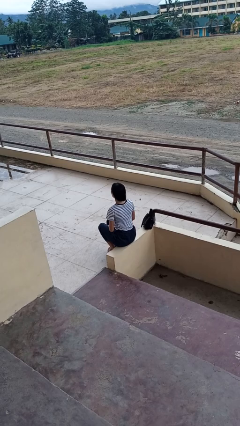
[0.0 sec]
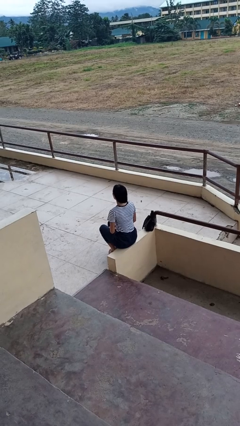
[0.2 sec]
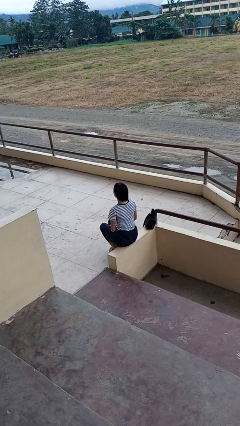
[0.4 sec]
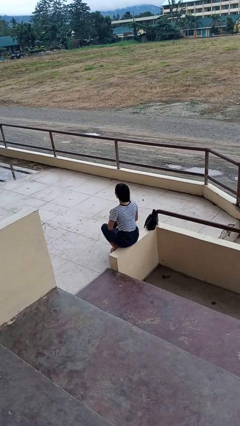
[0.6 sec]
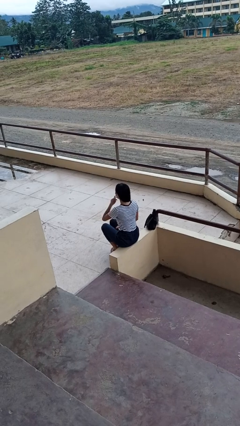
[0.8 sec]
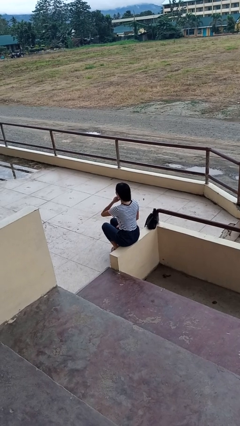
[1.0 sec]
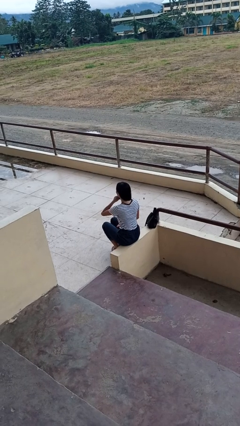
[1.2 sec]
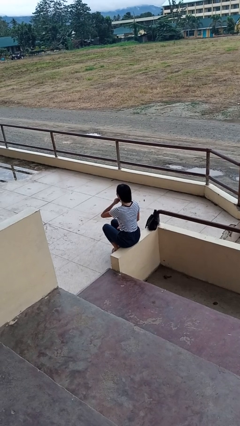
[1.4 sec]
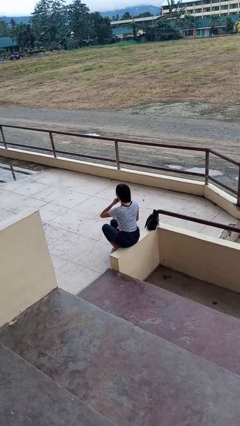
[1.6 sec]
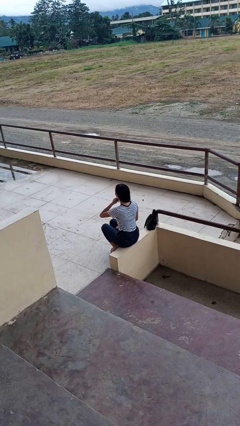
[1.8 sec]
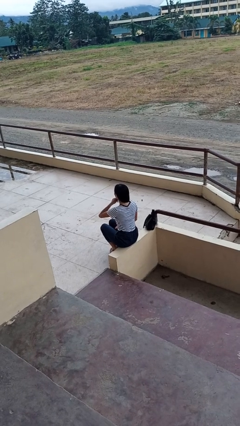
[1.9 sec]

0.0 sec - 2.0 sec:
person strokes chin

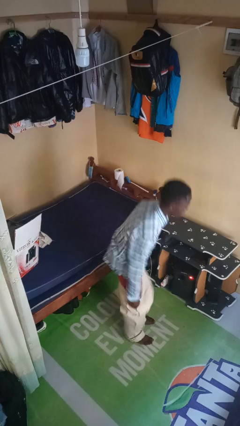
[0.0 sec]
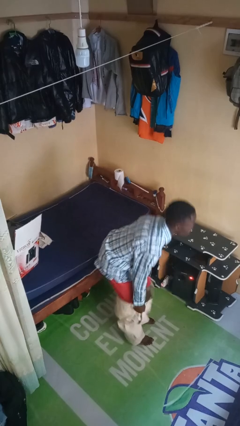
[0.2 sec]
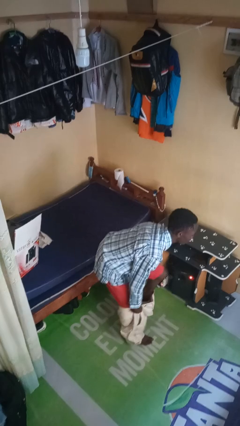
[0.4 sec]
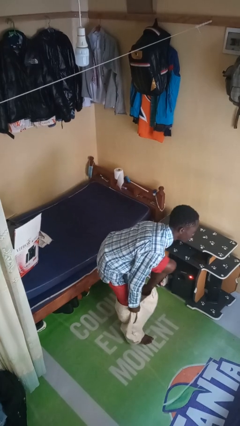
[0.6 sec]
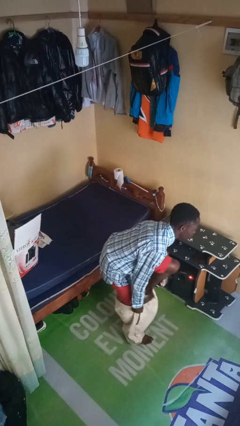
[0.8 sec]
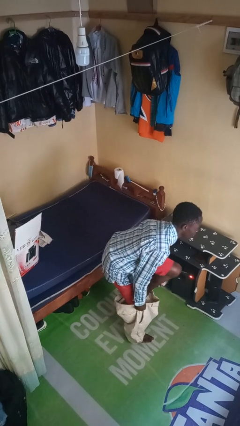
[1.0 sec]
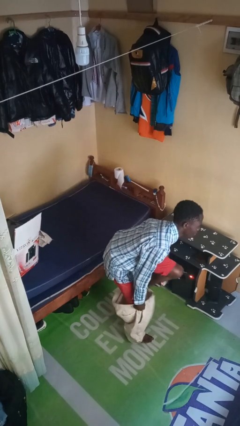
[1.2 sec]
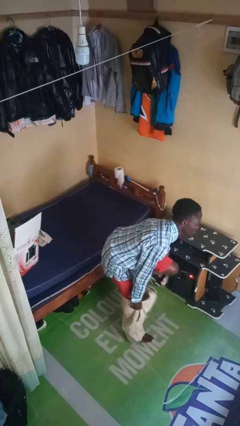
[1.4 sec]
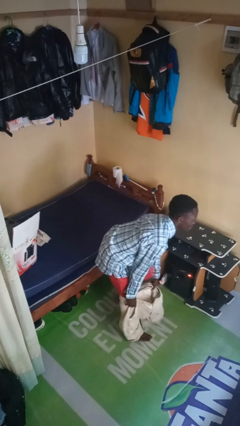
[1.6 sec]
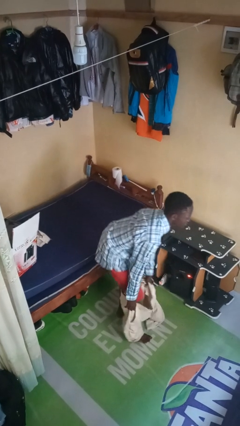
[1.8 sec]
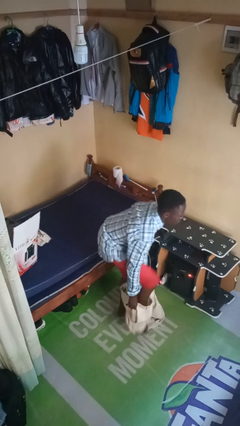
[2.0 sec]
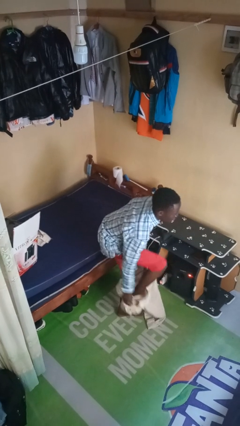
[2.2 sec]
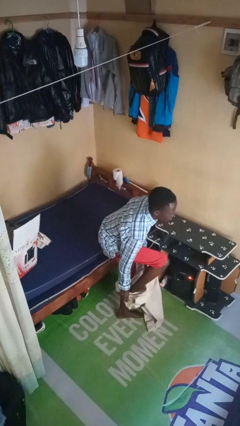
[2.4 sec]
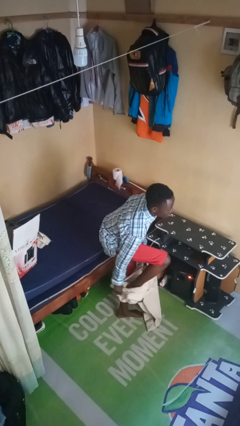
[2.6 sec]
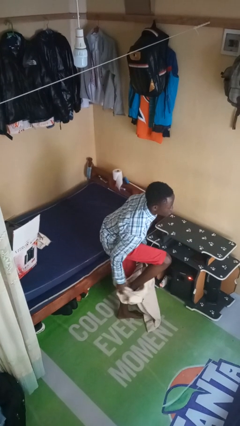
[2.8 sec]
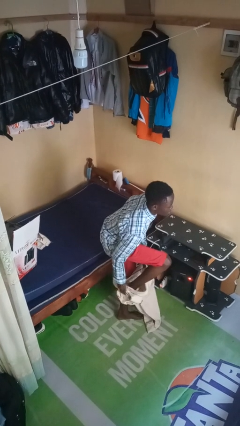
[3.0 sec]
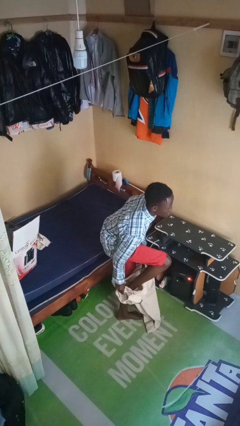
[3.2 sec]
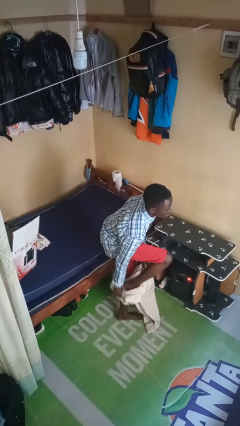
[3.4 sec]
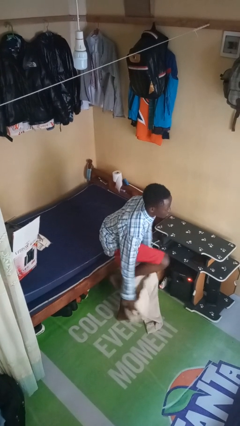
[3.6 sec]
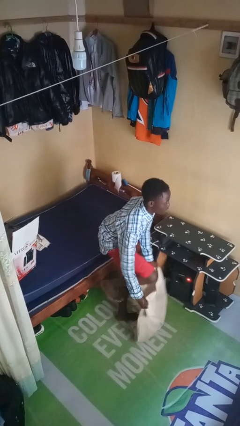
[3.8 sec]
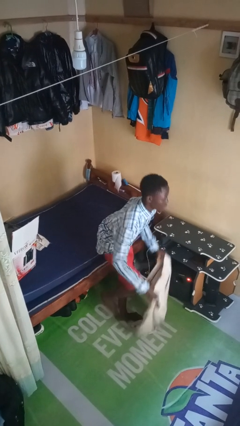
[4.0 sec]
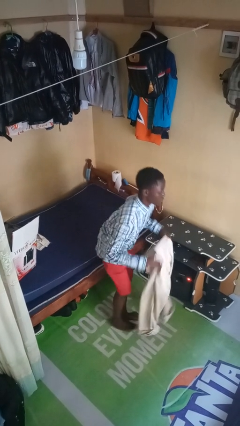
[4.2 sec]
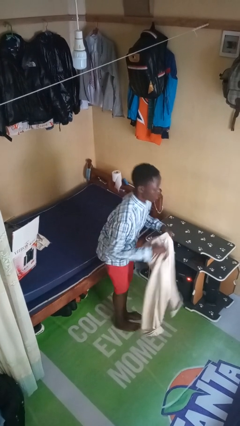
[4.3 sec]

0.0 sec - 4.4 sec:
person takes off pants

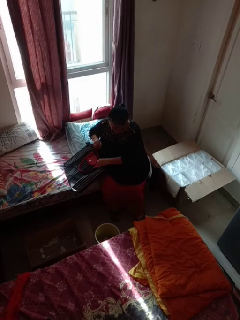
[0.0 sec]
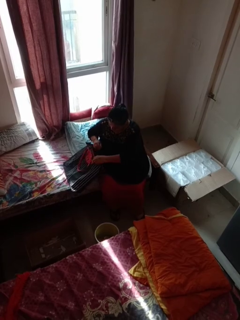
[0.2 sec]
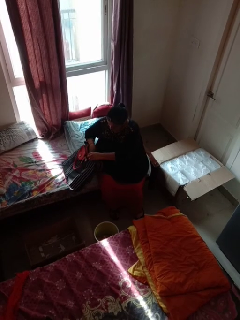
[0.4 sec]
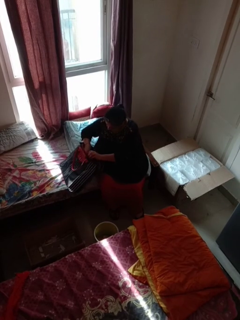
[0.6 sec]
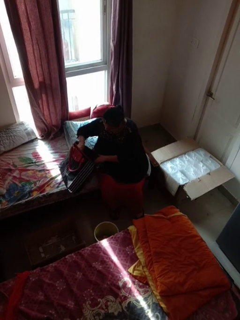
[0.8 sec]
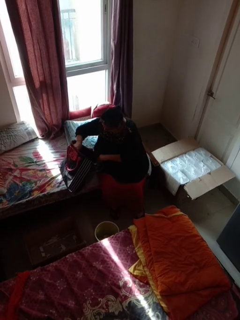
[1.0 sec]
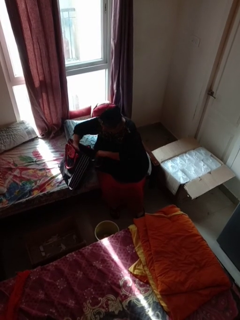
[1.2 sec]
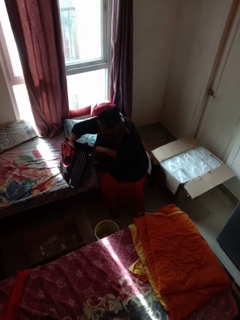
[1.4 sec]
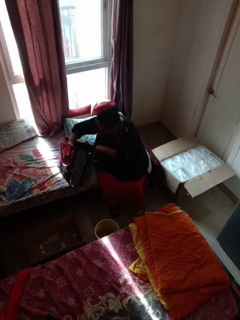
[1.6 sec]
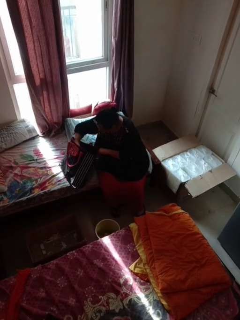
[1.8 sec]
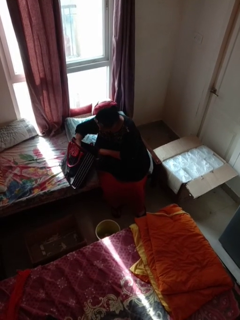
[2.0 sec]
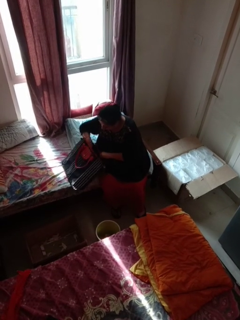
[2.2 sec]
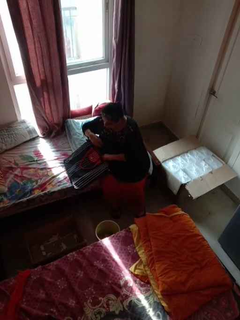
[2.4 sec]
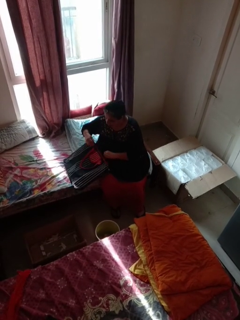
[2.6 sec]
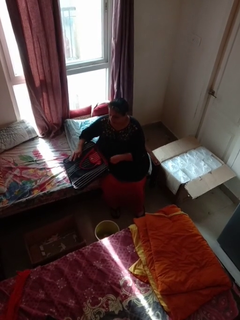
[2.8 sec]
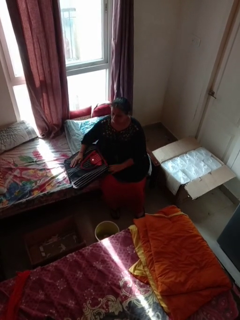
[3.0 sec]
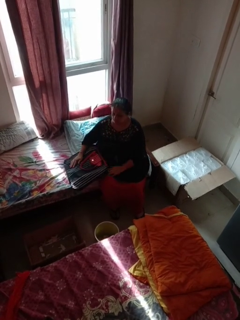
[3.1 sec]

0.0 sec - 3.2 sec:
person searches in bag

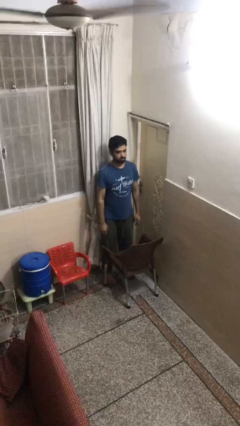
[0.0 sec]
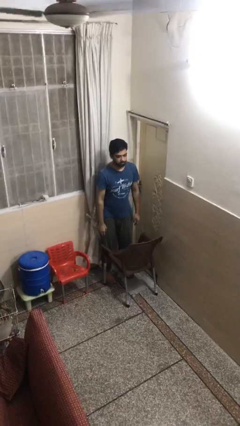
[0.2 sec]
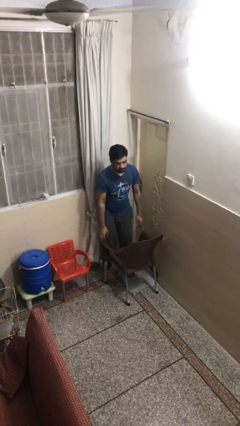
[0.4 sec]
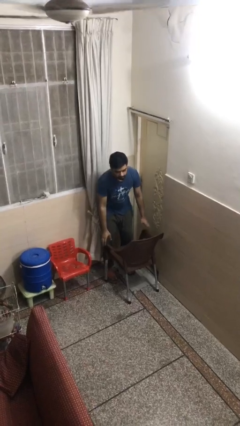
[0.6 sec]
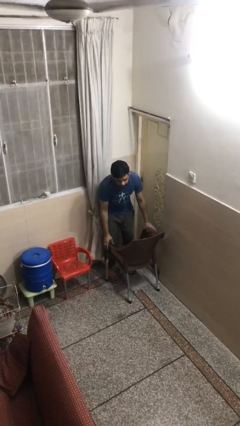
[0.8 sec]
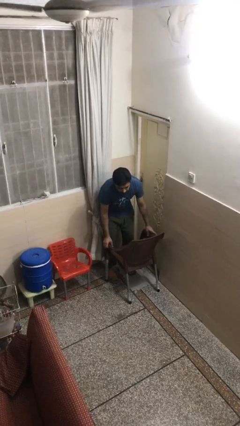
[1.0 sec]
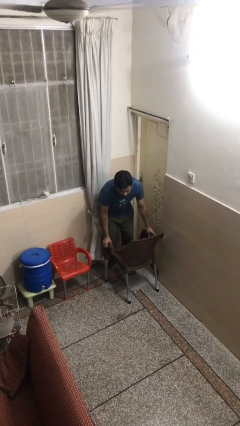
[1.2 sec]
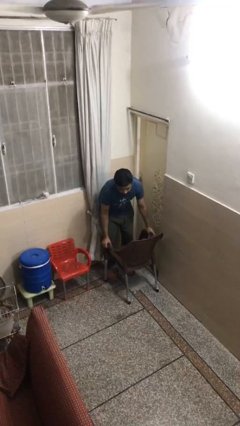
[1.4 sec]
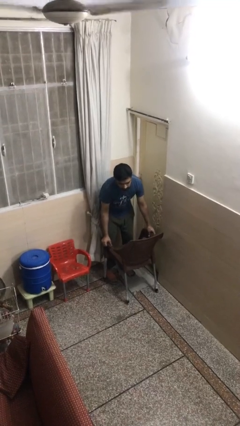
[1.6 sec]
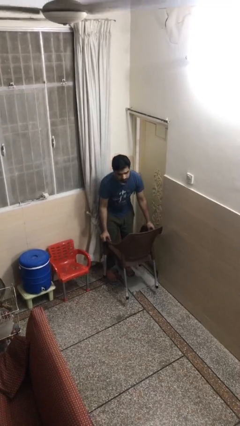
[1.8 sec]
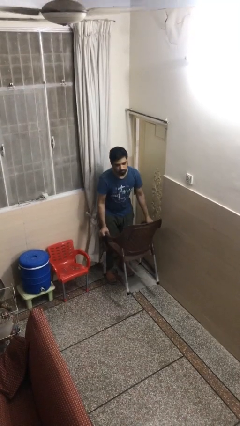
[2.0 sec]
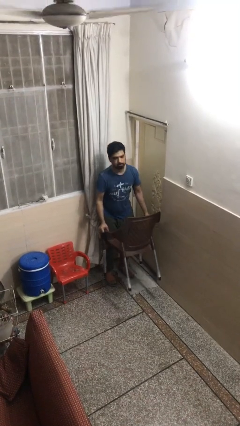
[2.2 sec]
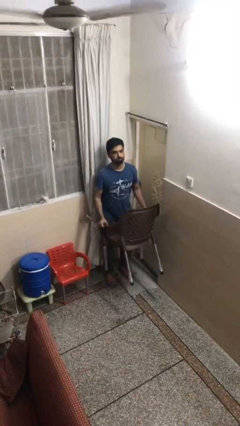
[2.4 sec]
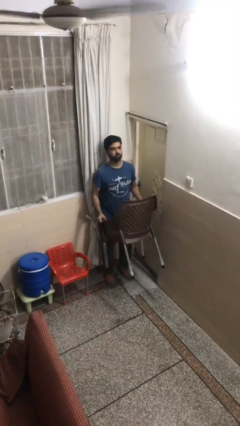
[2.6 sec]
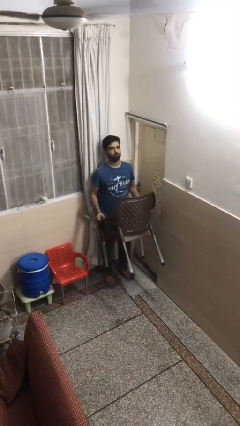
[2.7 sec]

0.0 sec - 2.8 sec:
person picks up object from floor

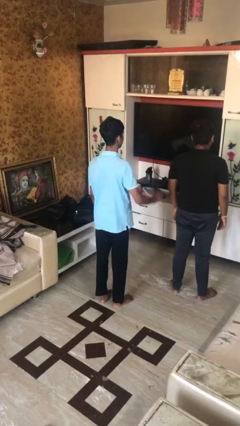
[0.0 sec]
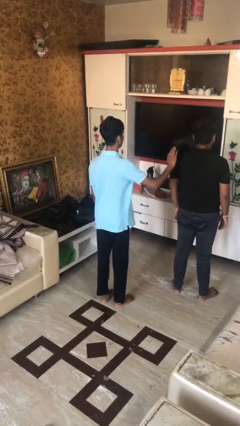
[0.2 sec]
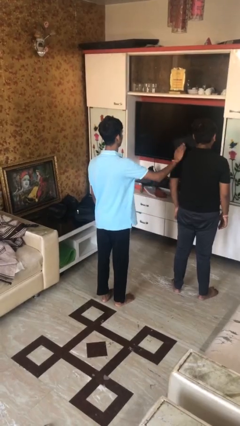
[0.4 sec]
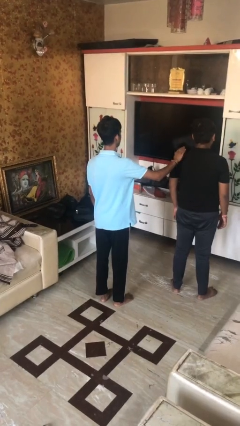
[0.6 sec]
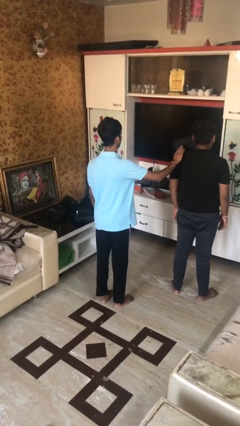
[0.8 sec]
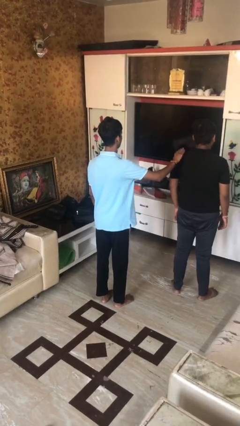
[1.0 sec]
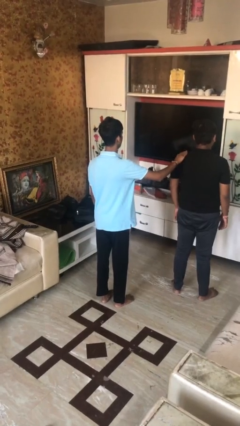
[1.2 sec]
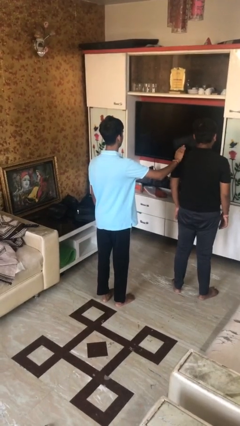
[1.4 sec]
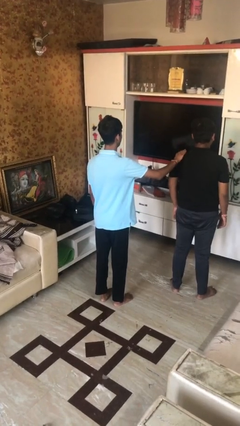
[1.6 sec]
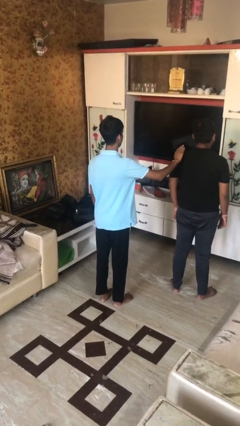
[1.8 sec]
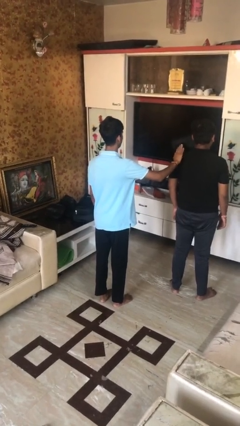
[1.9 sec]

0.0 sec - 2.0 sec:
person pounds shoulders of person

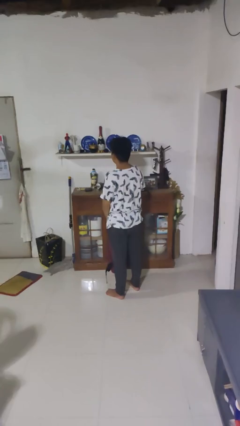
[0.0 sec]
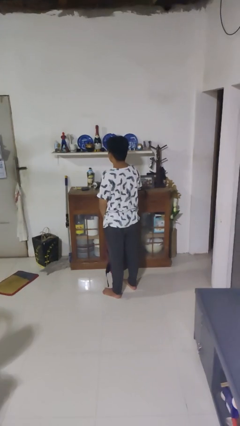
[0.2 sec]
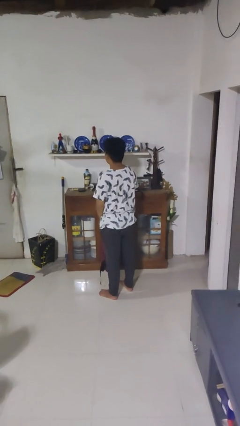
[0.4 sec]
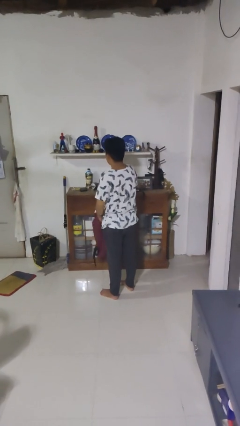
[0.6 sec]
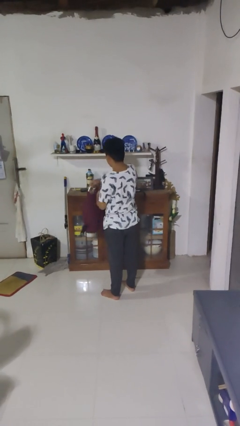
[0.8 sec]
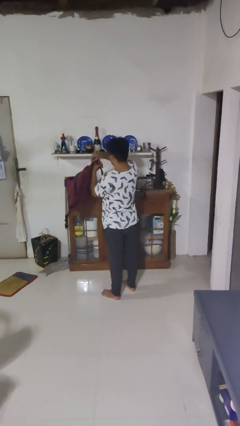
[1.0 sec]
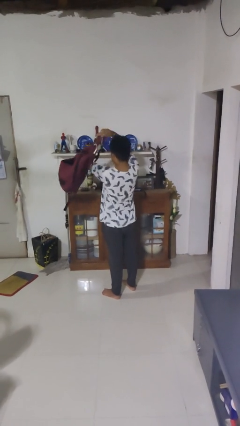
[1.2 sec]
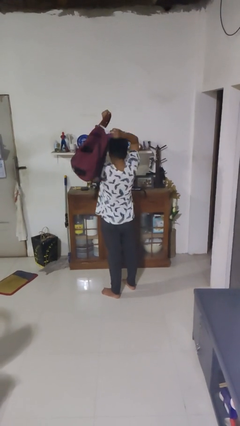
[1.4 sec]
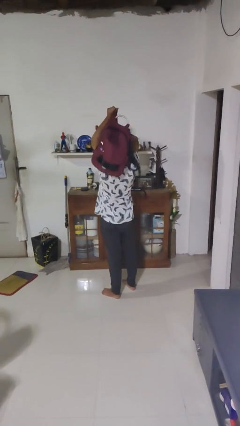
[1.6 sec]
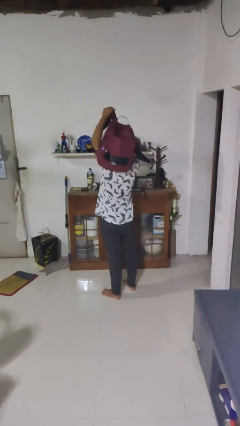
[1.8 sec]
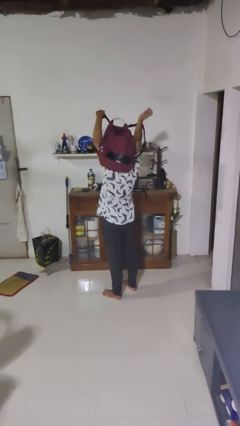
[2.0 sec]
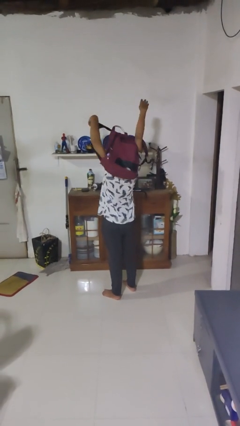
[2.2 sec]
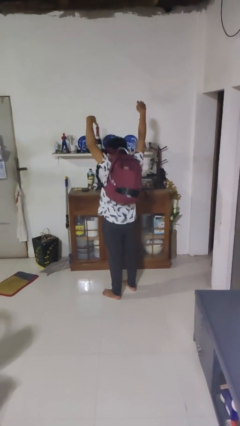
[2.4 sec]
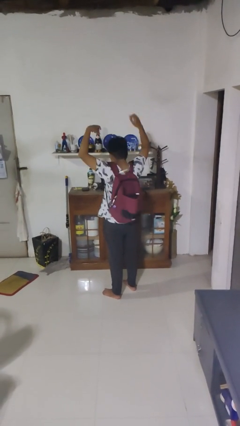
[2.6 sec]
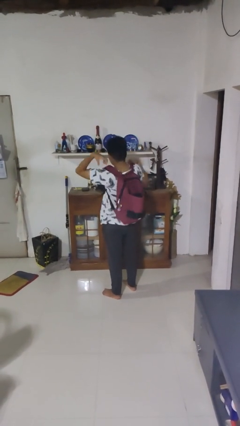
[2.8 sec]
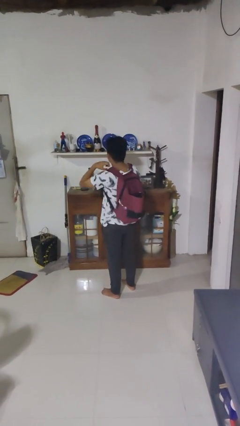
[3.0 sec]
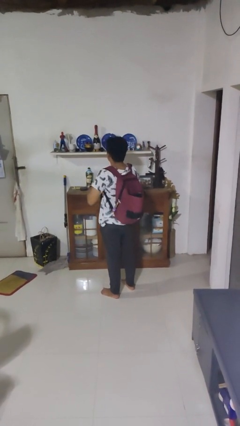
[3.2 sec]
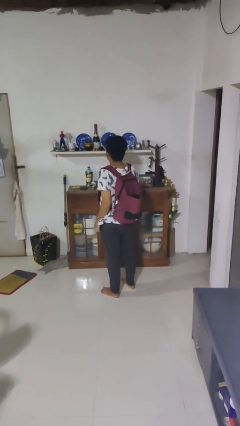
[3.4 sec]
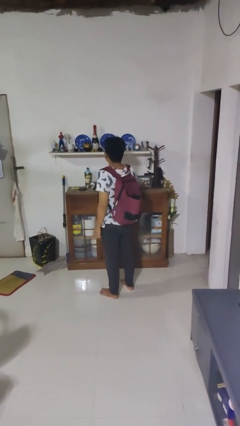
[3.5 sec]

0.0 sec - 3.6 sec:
person puts on backpack
